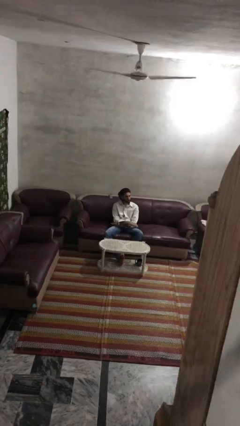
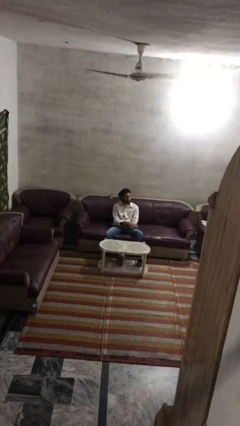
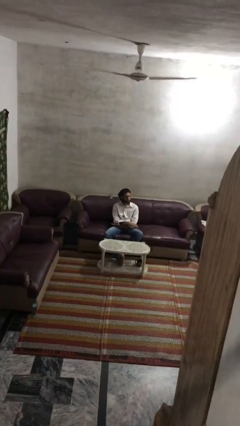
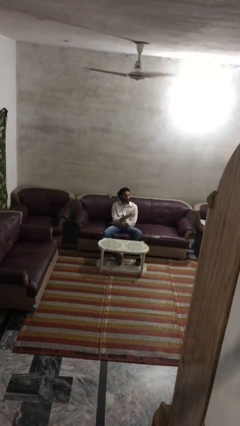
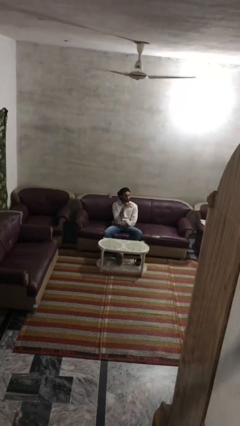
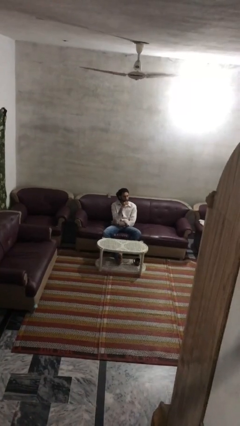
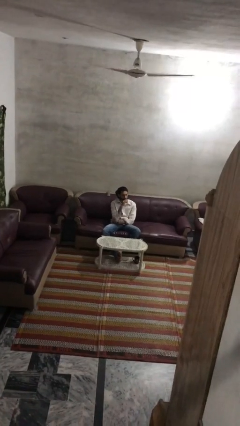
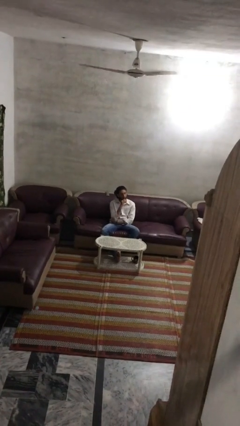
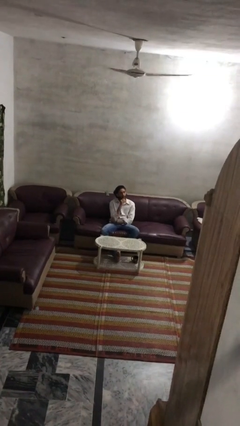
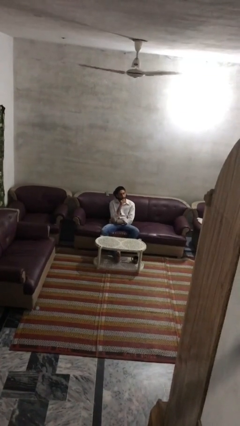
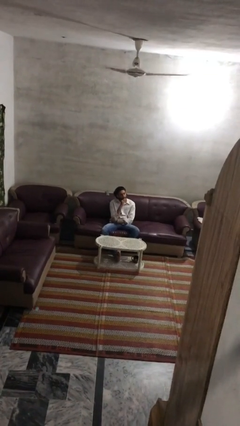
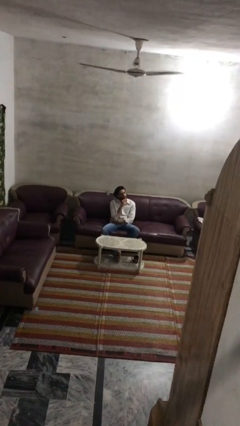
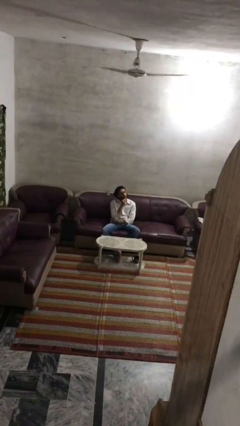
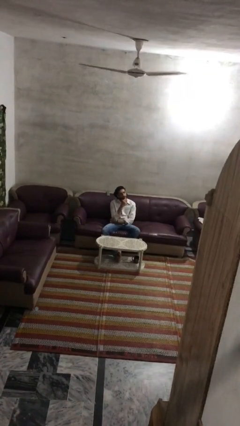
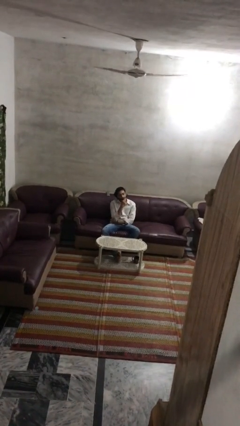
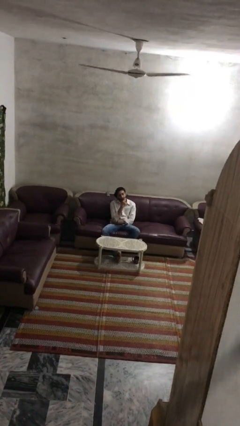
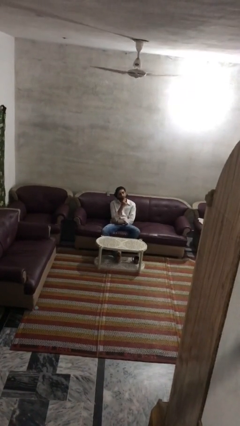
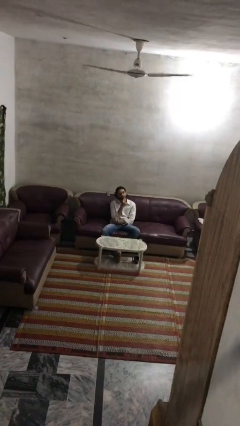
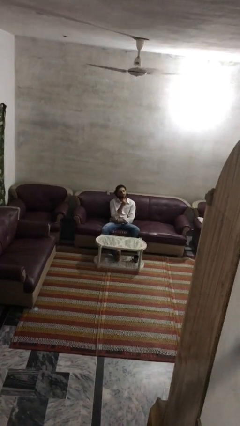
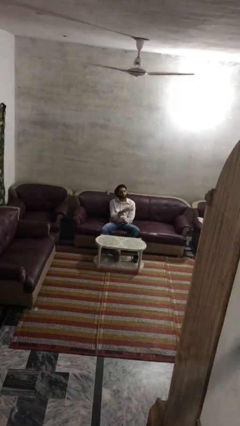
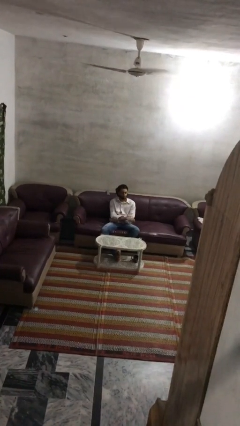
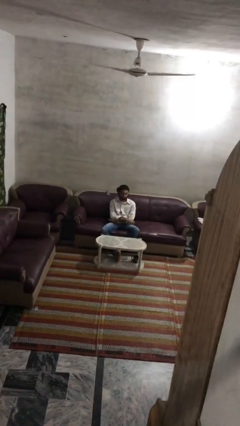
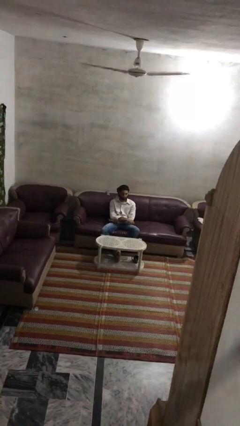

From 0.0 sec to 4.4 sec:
person strokes chin

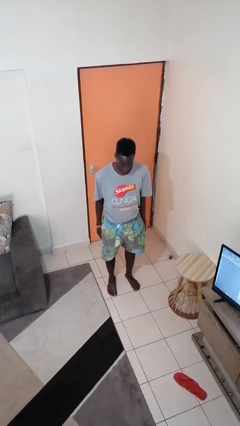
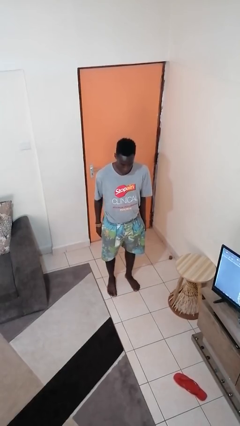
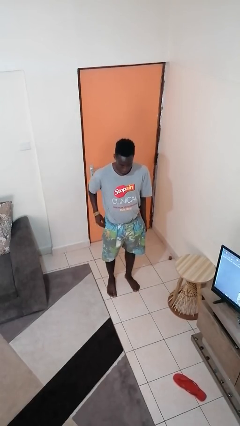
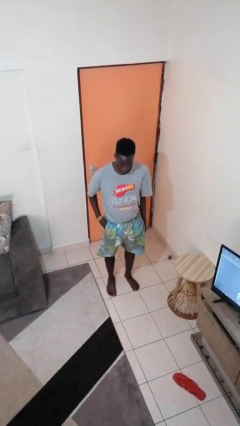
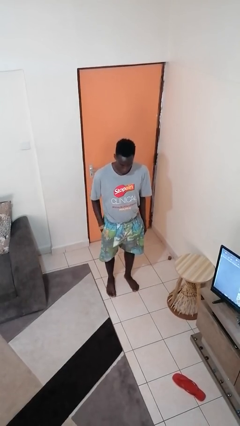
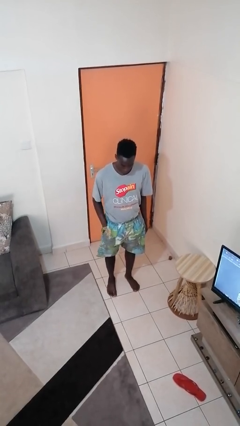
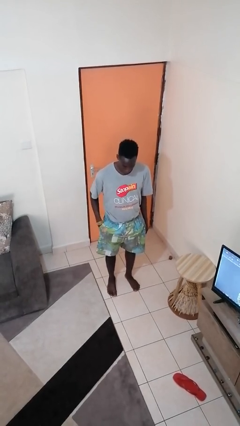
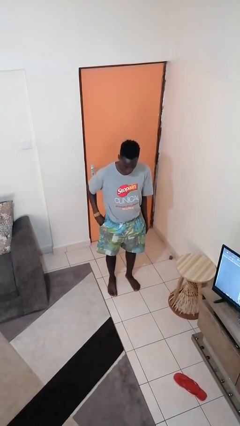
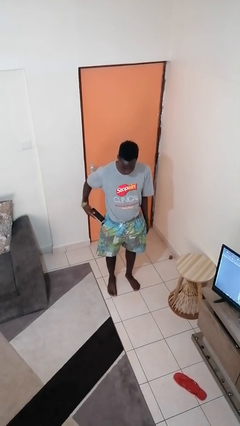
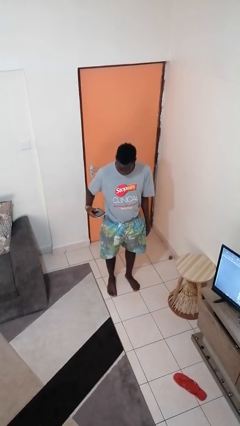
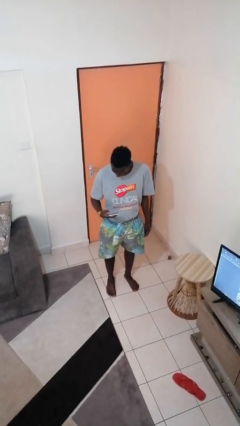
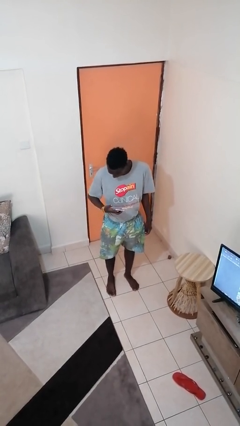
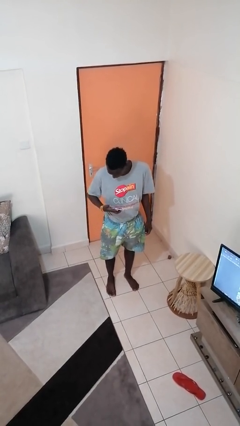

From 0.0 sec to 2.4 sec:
person takes phone from pocket

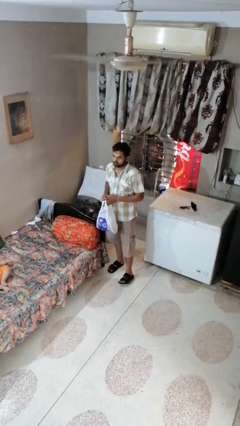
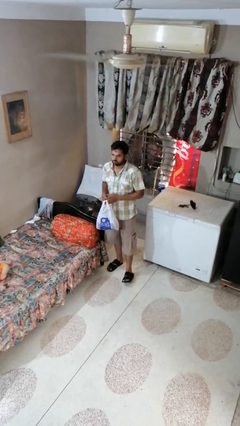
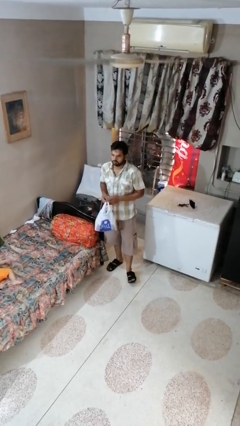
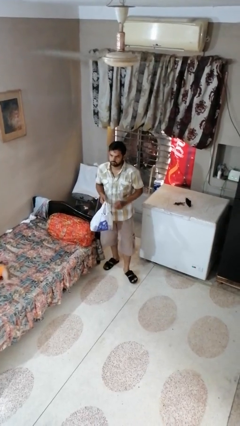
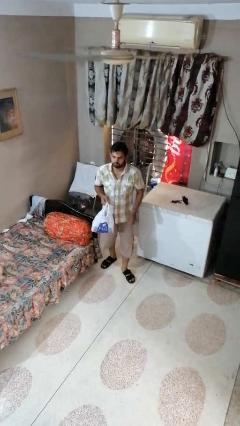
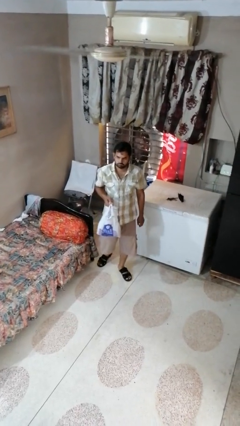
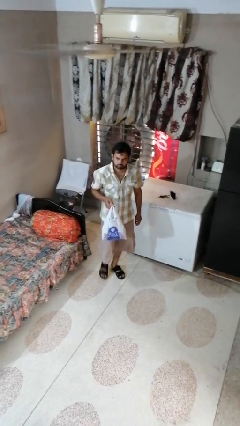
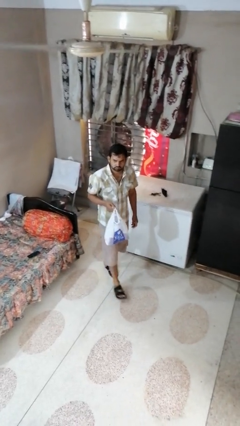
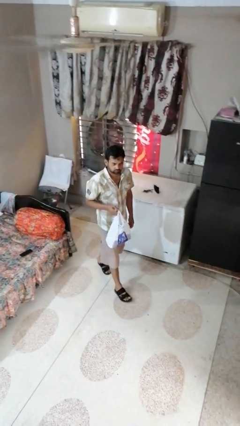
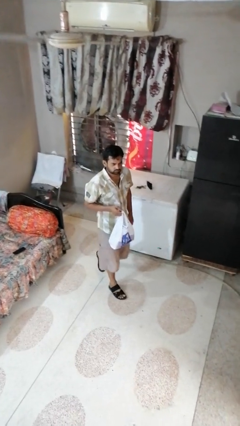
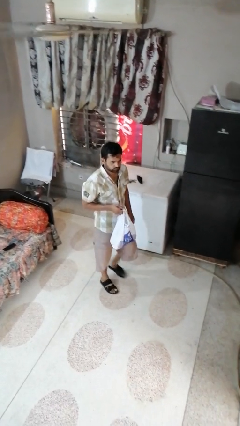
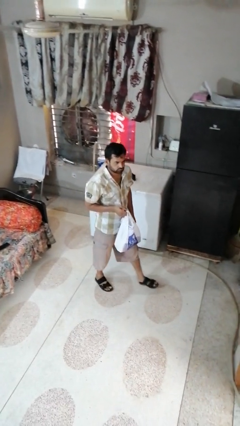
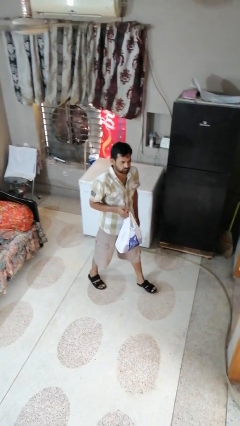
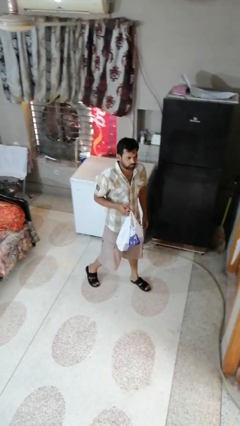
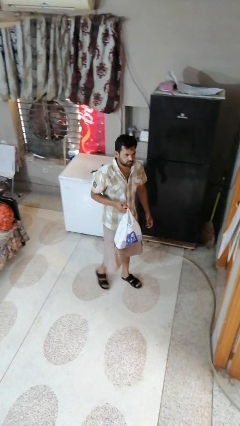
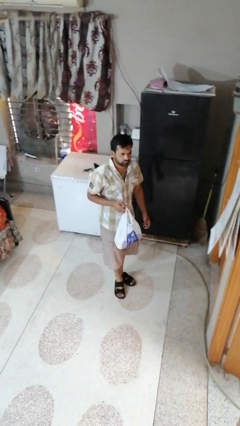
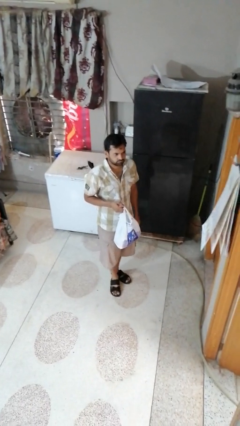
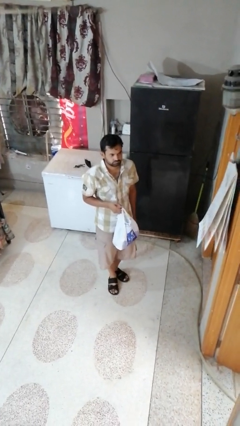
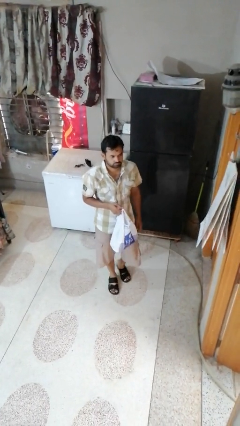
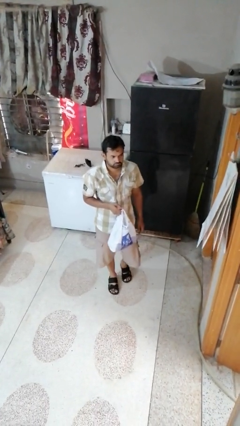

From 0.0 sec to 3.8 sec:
person carries groceries

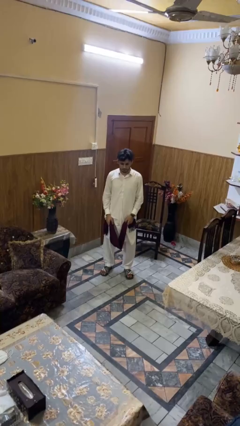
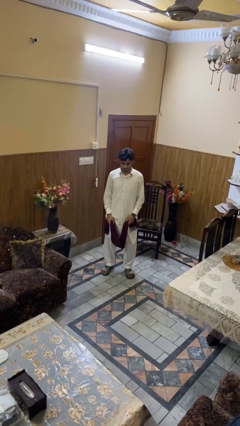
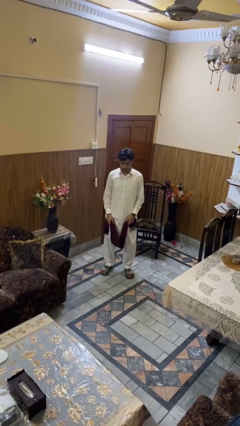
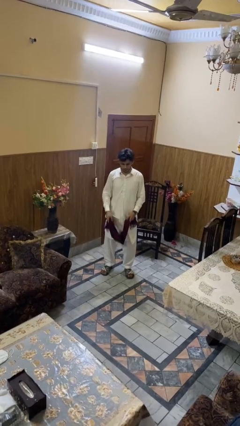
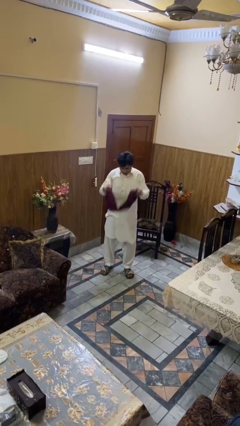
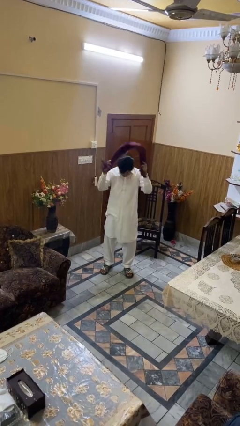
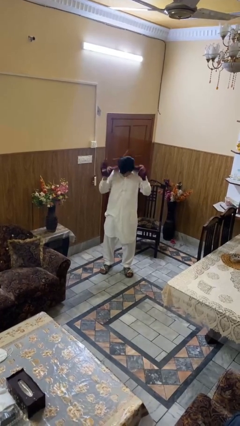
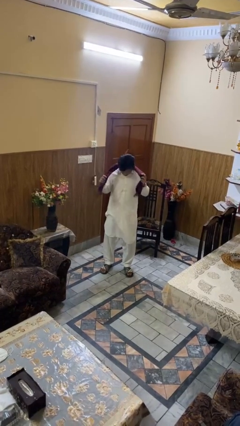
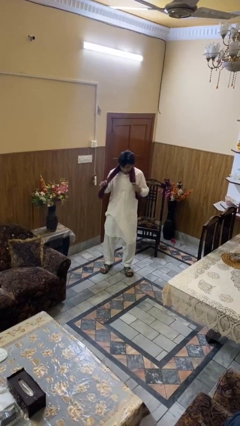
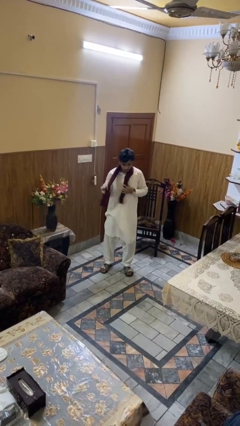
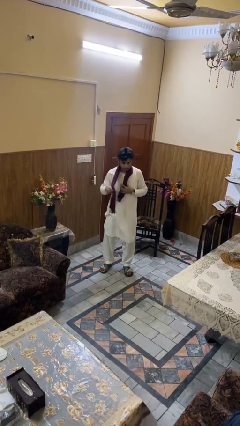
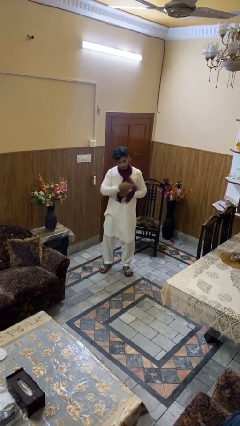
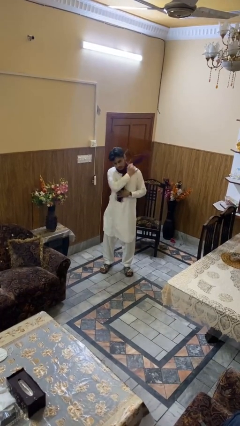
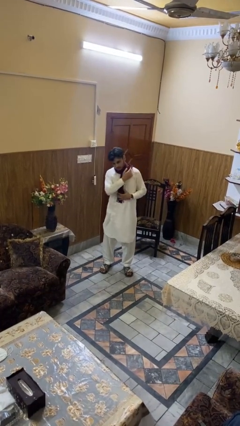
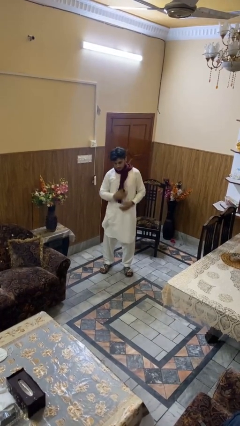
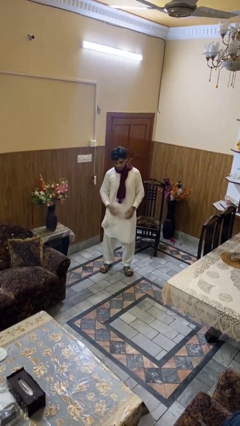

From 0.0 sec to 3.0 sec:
person puts on scarf

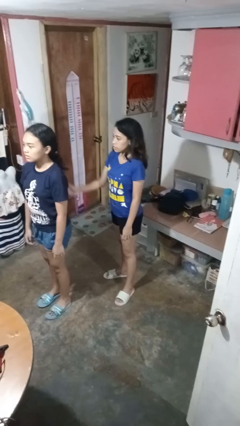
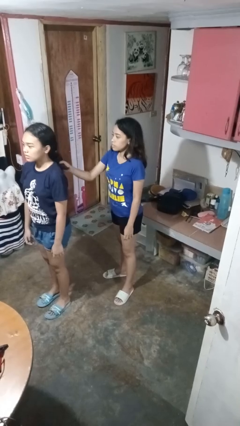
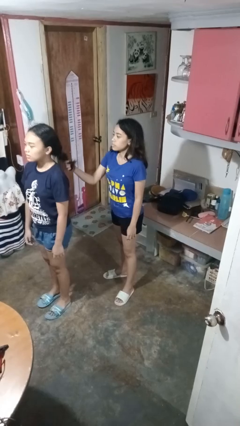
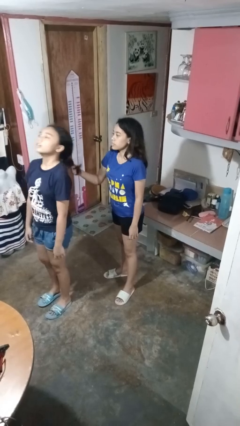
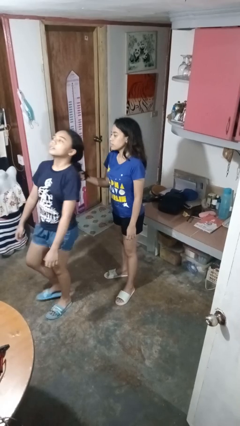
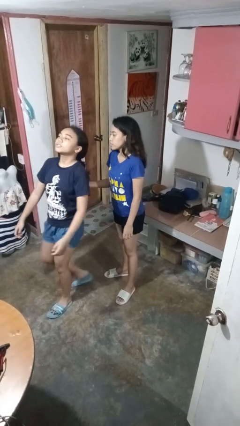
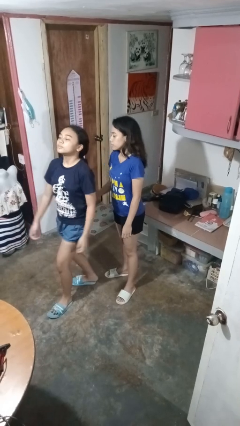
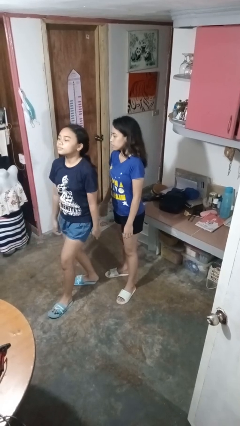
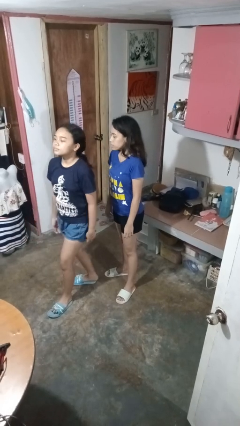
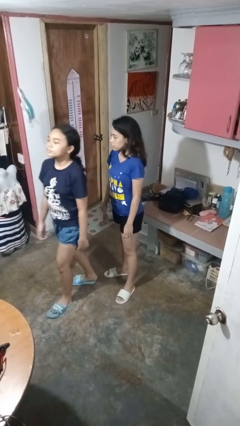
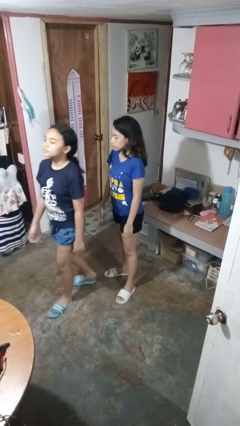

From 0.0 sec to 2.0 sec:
person grabs person by hair

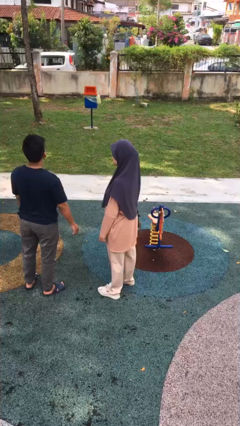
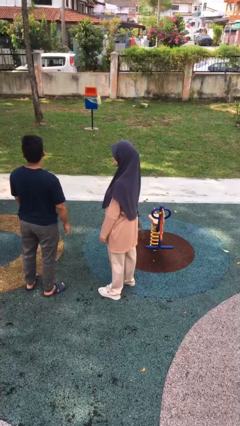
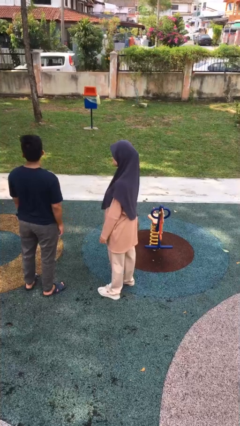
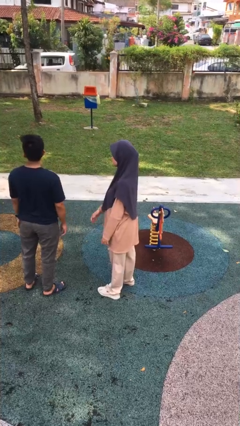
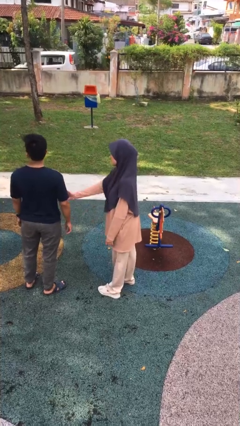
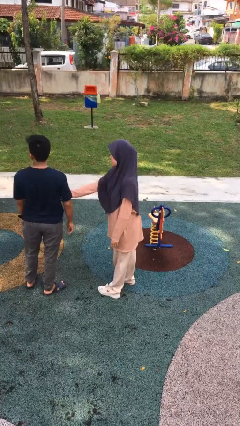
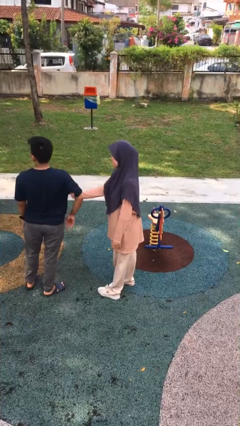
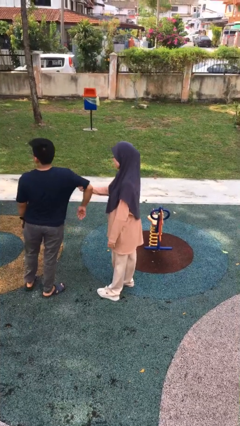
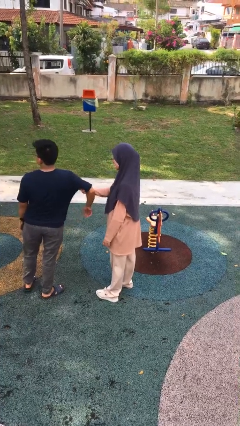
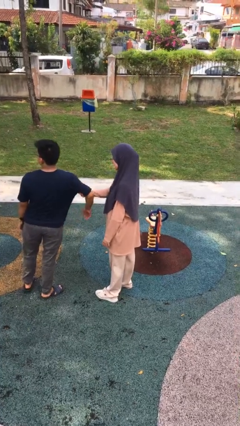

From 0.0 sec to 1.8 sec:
person grabs person by bicep

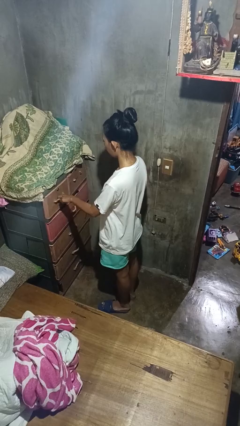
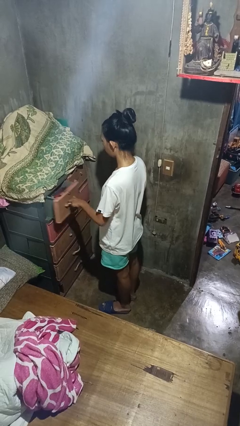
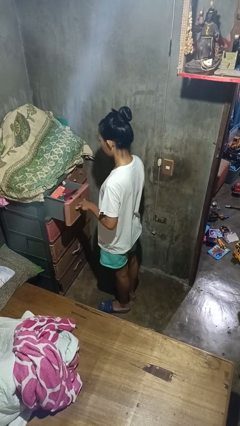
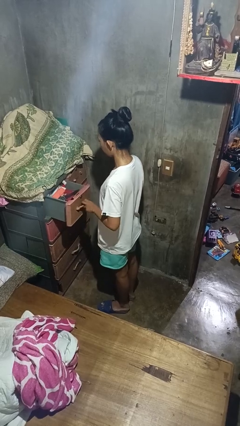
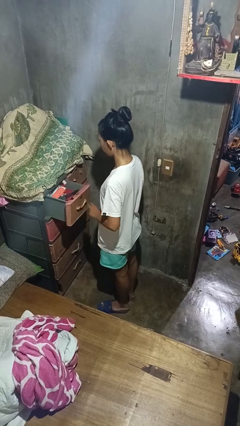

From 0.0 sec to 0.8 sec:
person opens dresser drawer
